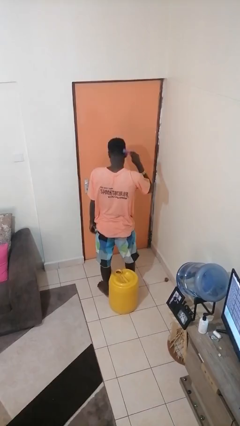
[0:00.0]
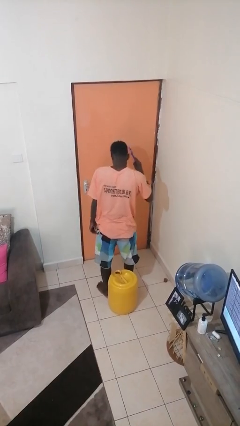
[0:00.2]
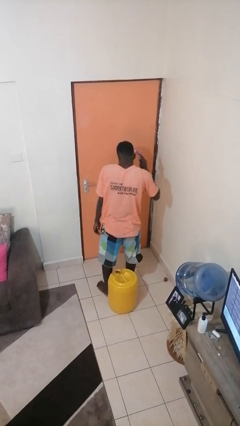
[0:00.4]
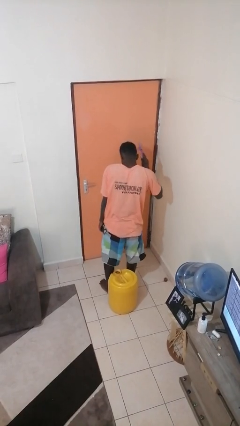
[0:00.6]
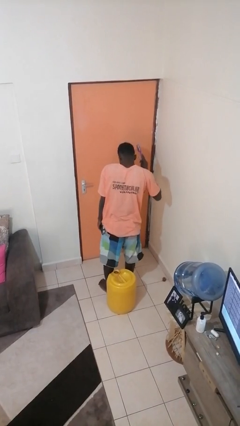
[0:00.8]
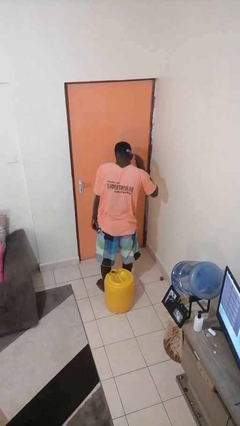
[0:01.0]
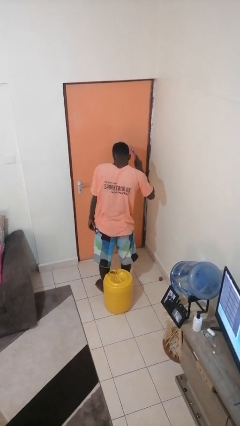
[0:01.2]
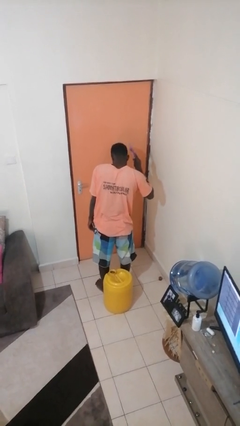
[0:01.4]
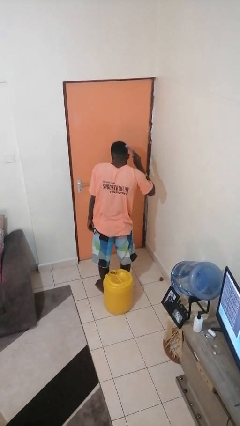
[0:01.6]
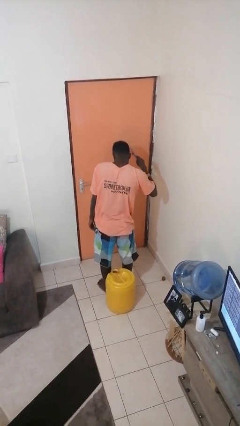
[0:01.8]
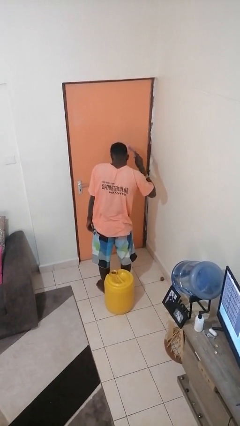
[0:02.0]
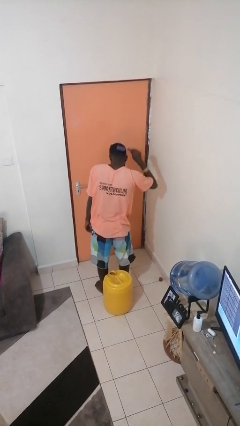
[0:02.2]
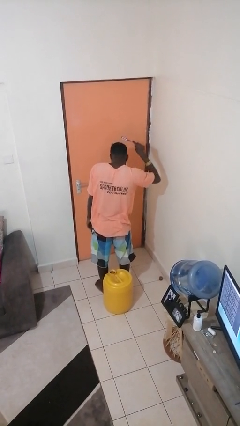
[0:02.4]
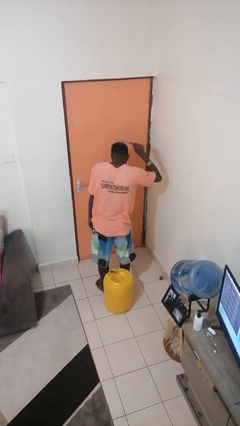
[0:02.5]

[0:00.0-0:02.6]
person brushes hair

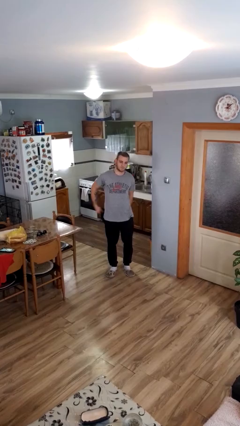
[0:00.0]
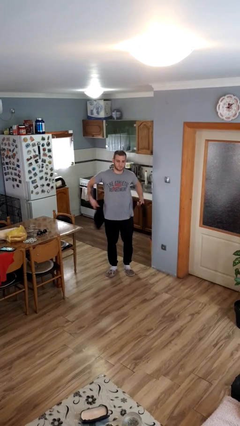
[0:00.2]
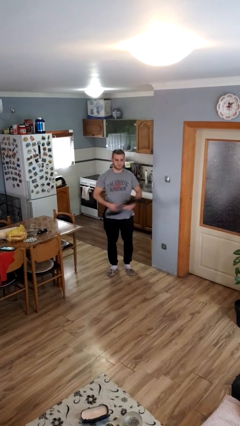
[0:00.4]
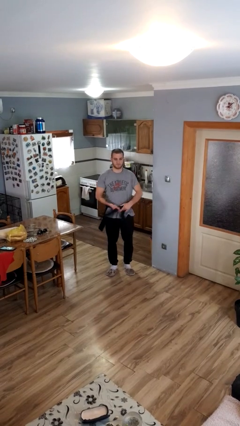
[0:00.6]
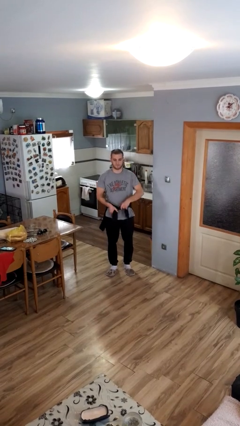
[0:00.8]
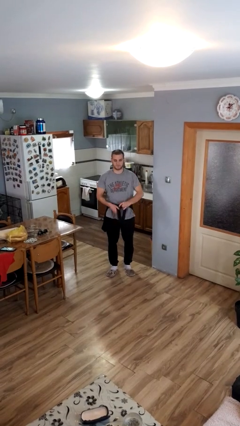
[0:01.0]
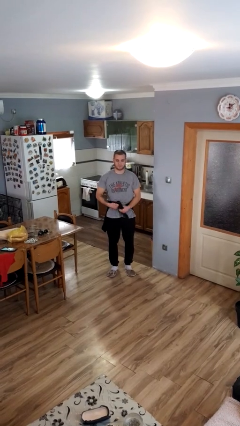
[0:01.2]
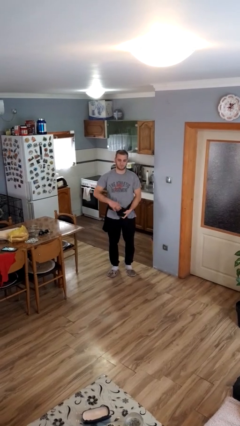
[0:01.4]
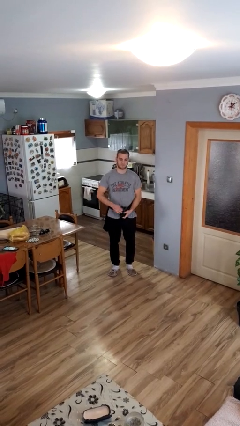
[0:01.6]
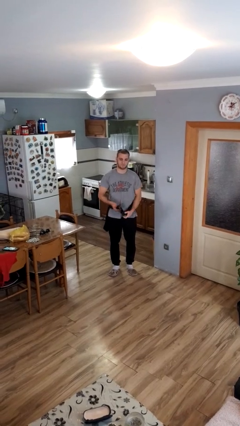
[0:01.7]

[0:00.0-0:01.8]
person ties jacket around waist

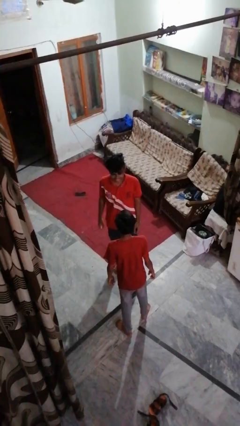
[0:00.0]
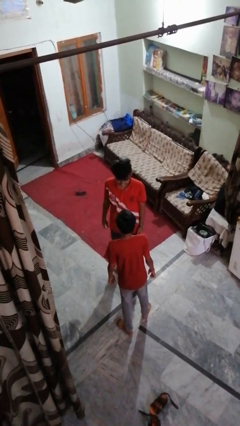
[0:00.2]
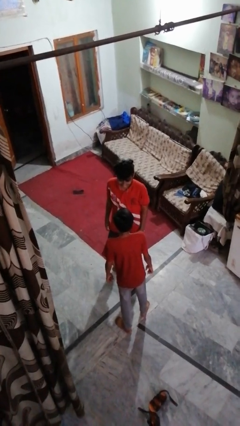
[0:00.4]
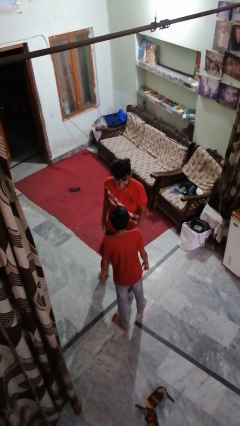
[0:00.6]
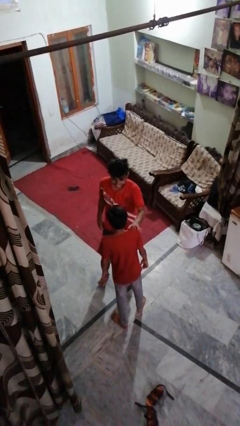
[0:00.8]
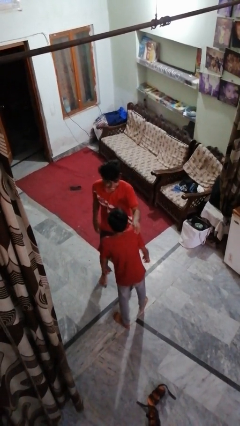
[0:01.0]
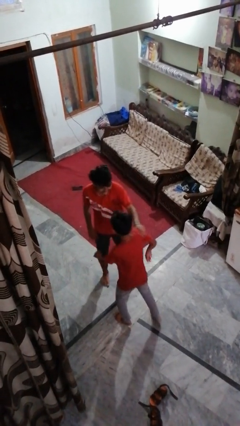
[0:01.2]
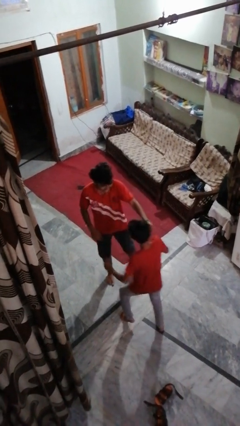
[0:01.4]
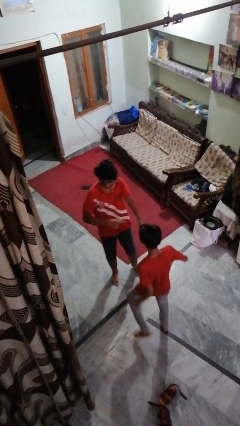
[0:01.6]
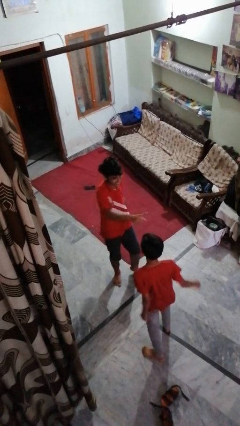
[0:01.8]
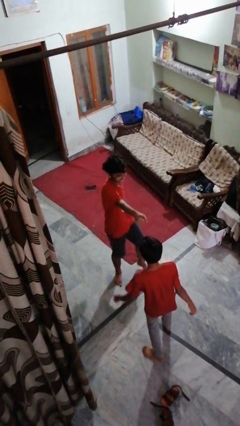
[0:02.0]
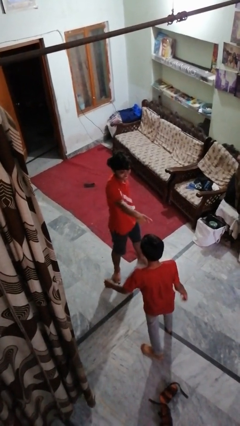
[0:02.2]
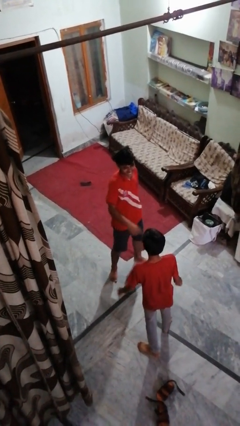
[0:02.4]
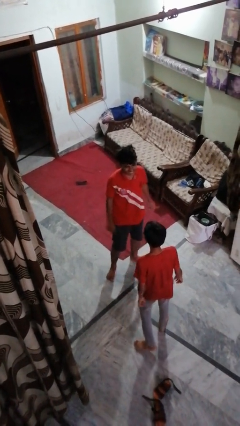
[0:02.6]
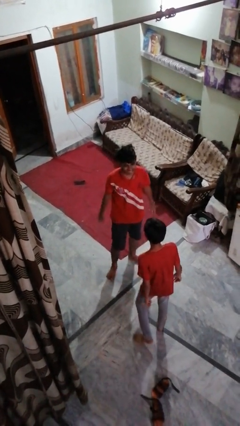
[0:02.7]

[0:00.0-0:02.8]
person shoves person

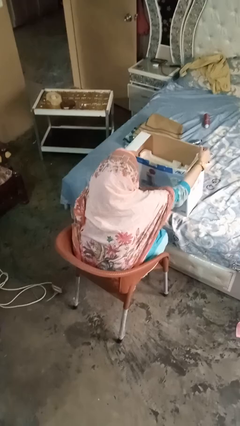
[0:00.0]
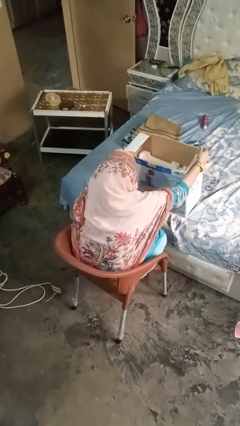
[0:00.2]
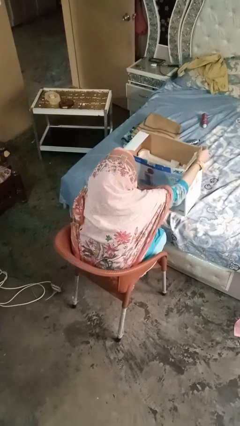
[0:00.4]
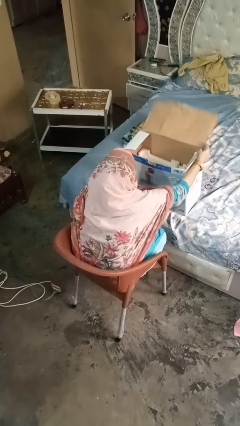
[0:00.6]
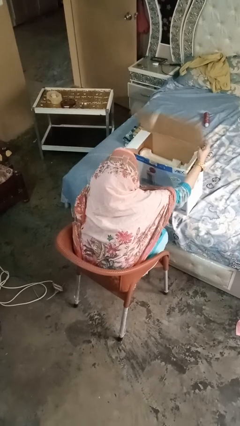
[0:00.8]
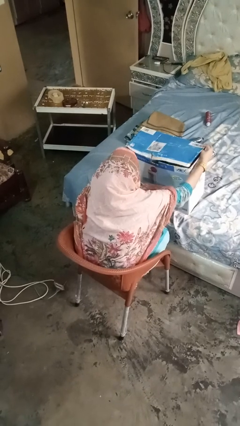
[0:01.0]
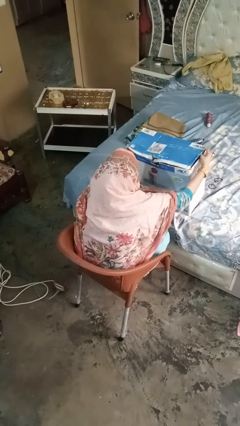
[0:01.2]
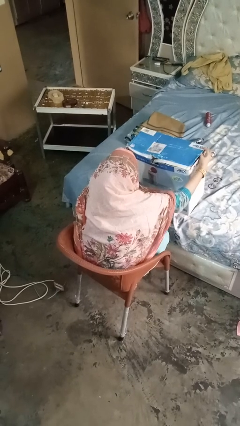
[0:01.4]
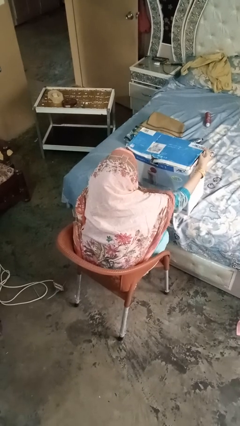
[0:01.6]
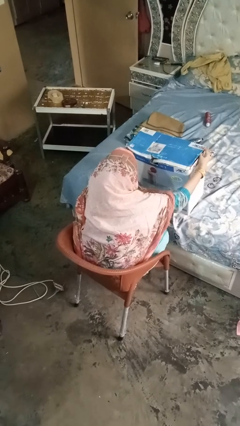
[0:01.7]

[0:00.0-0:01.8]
person closes box

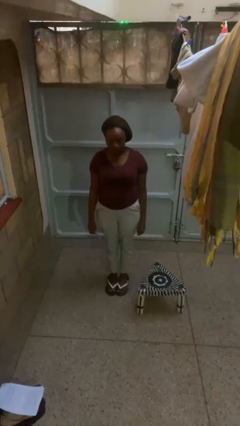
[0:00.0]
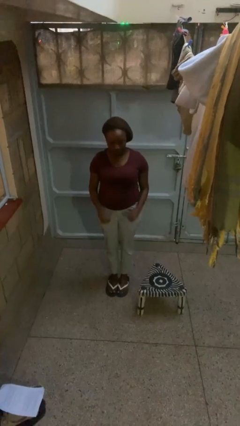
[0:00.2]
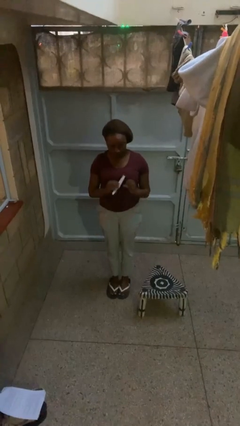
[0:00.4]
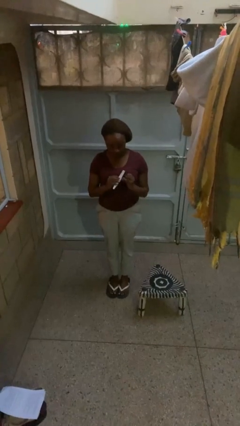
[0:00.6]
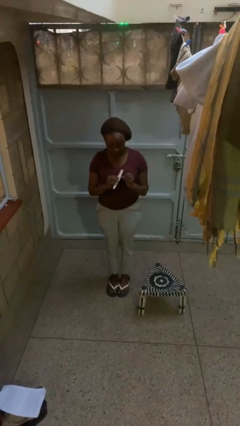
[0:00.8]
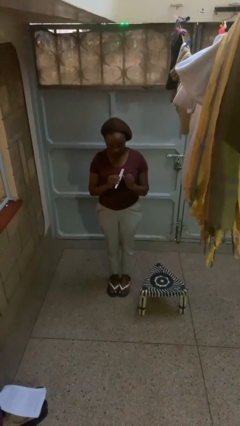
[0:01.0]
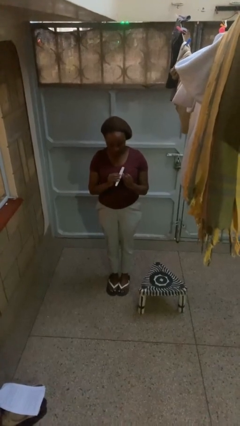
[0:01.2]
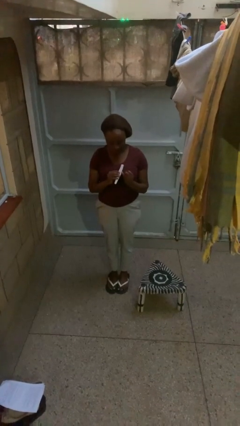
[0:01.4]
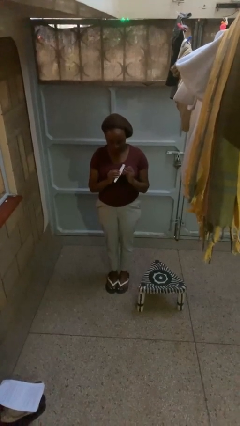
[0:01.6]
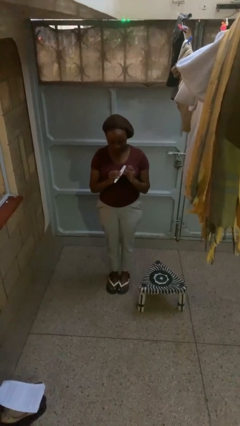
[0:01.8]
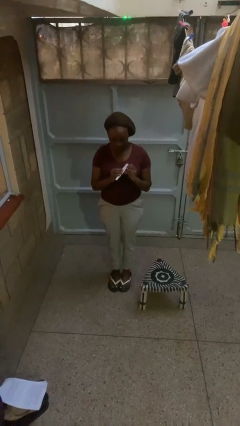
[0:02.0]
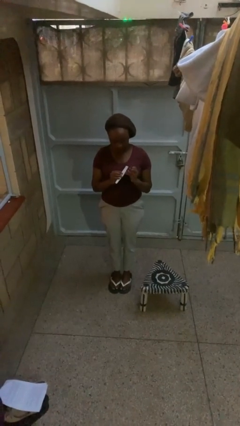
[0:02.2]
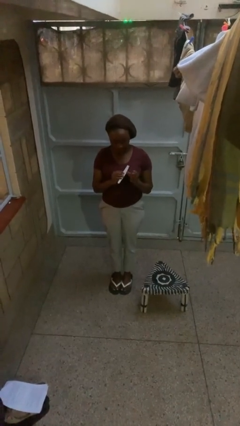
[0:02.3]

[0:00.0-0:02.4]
person files fingernails

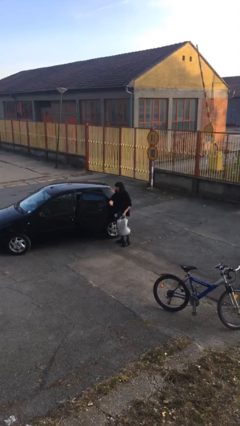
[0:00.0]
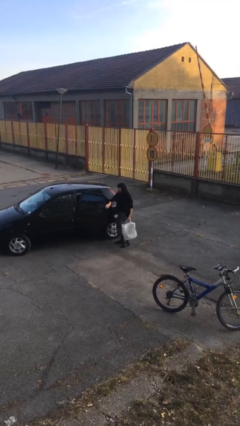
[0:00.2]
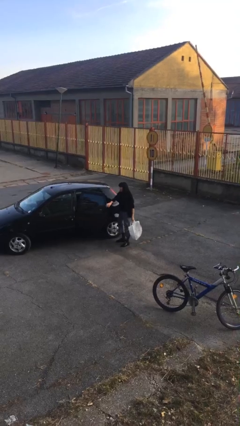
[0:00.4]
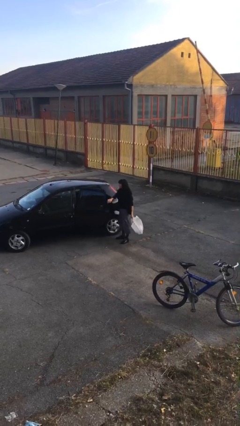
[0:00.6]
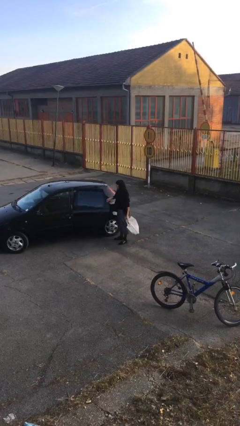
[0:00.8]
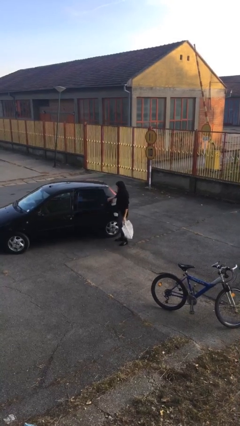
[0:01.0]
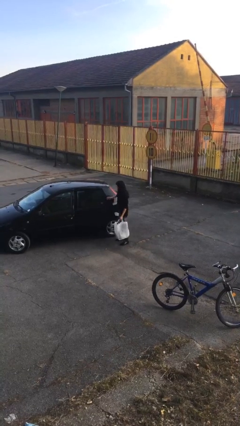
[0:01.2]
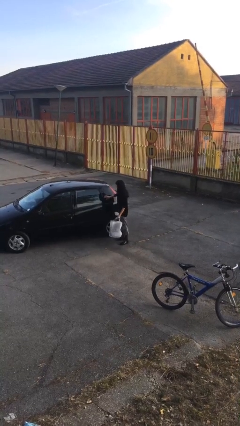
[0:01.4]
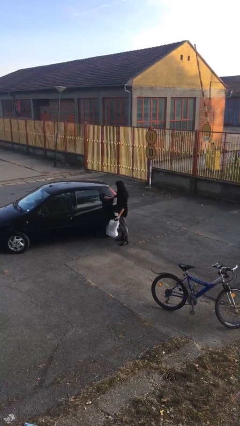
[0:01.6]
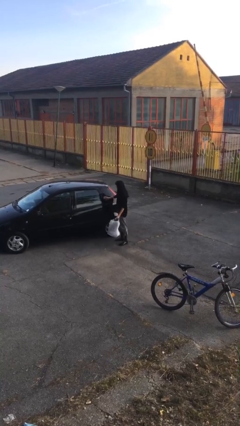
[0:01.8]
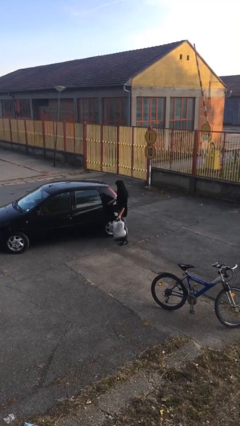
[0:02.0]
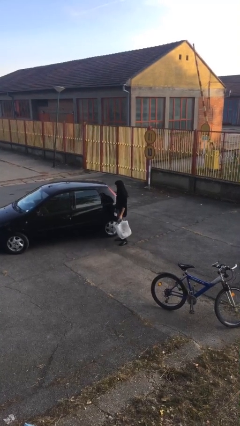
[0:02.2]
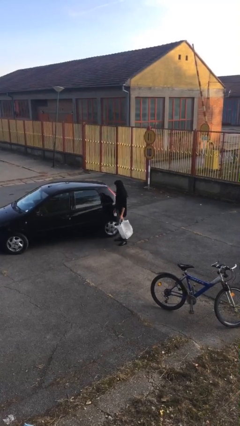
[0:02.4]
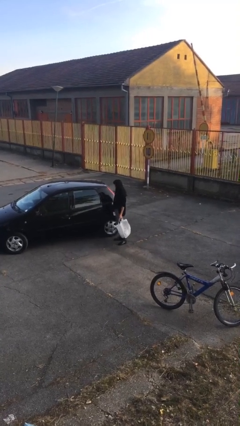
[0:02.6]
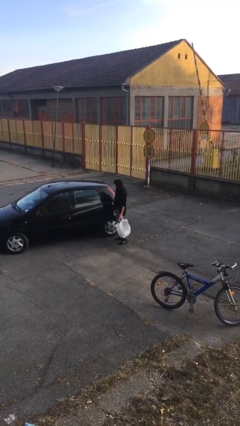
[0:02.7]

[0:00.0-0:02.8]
person closes car door

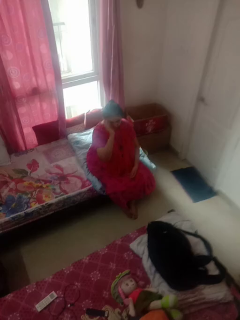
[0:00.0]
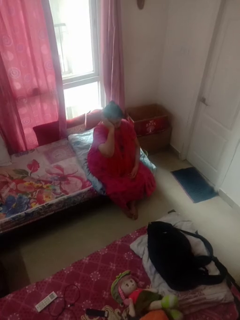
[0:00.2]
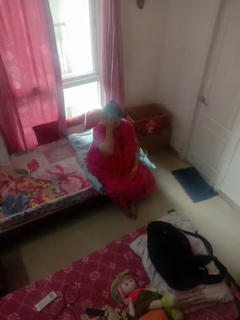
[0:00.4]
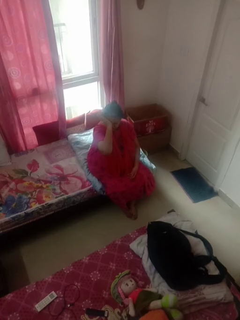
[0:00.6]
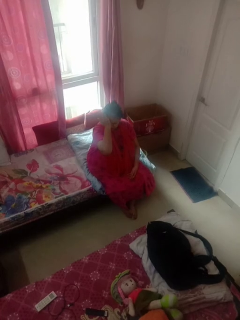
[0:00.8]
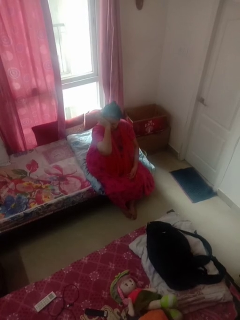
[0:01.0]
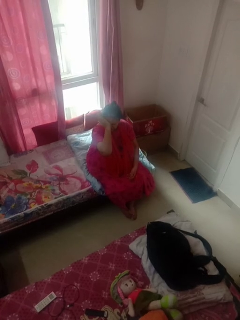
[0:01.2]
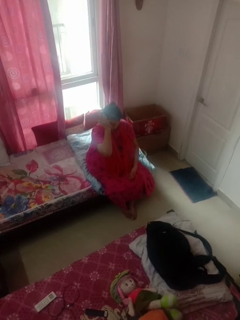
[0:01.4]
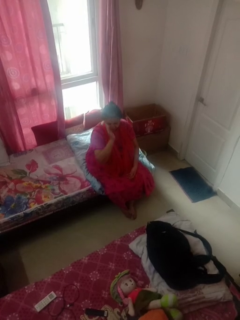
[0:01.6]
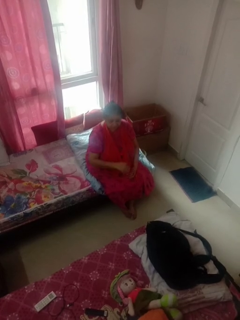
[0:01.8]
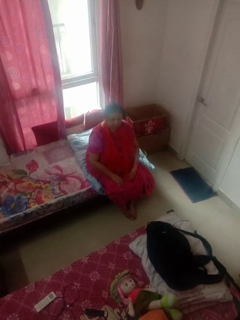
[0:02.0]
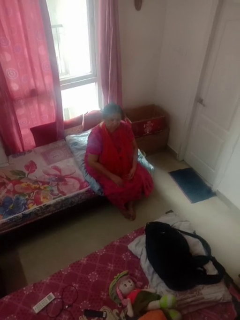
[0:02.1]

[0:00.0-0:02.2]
person rubs eyes

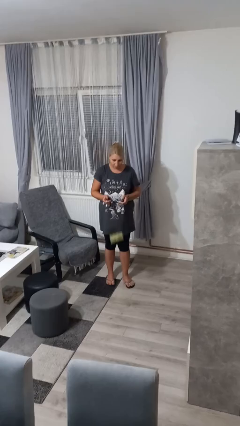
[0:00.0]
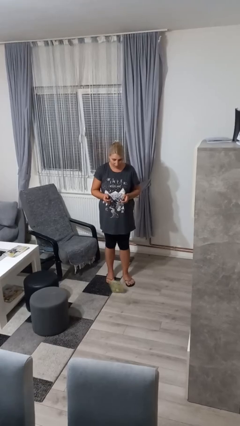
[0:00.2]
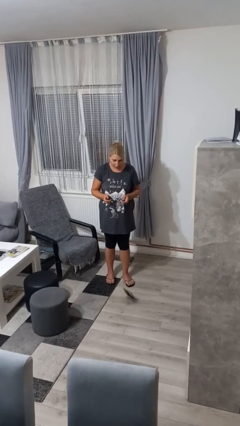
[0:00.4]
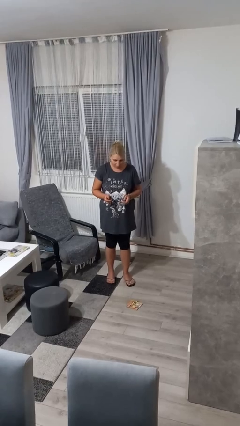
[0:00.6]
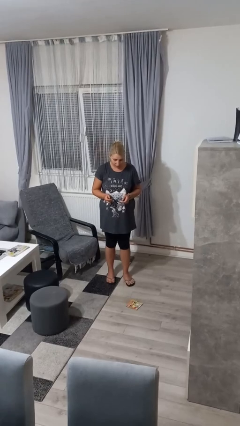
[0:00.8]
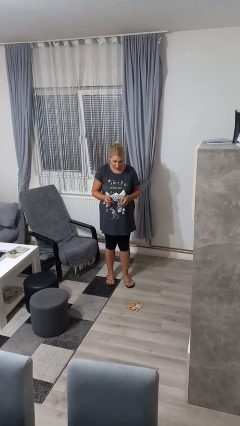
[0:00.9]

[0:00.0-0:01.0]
person drops object
